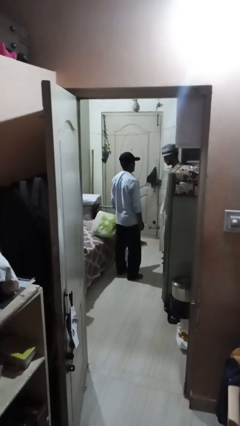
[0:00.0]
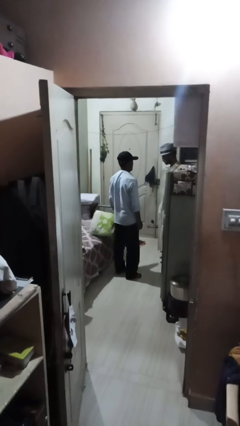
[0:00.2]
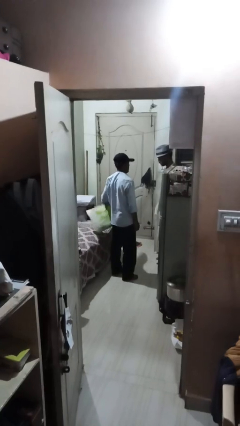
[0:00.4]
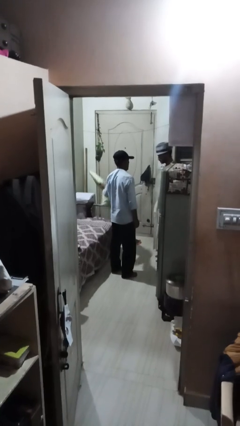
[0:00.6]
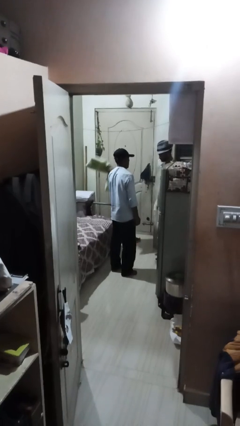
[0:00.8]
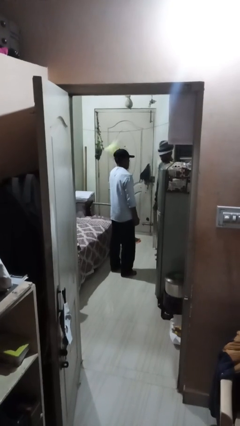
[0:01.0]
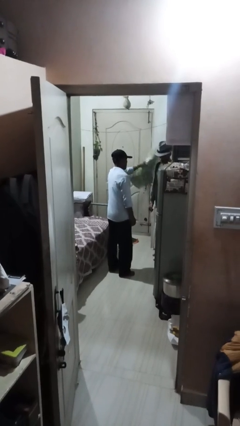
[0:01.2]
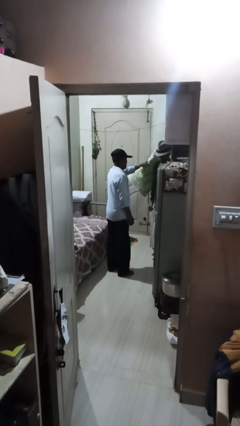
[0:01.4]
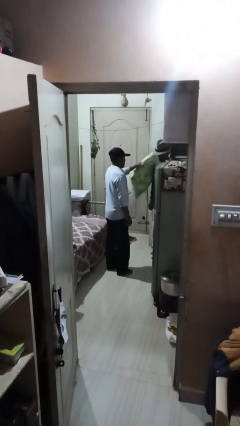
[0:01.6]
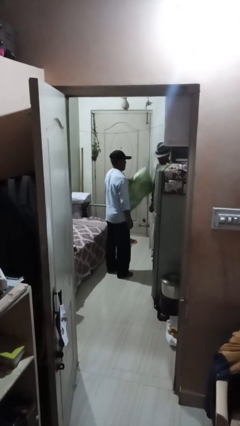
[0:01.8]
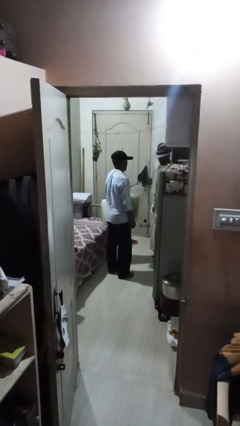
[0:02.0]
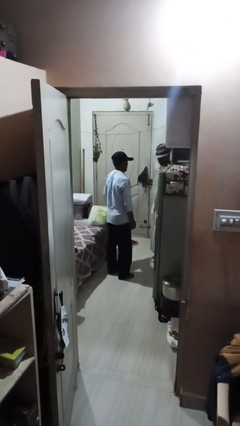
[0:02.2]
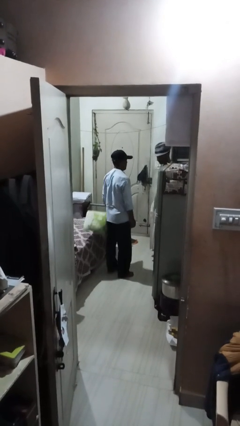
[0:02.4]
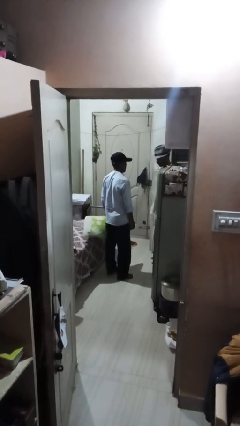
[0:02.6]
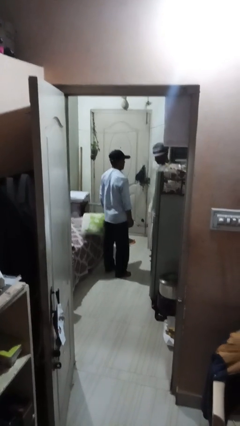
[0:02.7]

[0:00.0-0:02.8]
person hits person with pillow

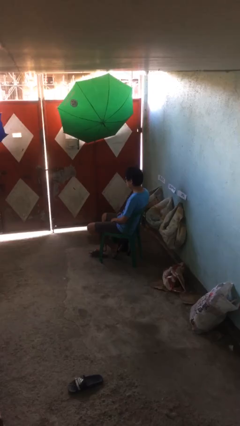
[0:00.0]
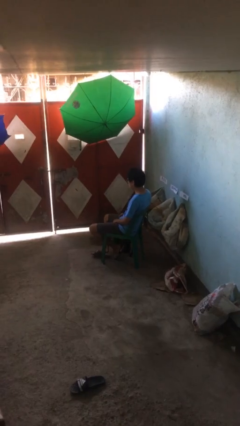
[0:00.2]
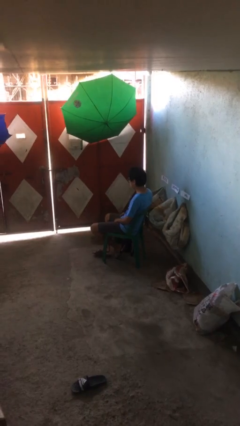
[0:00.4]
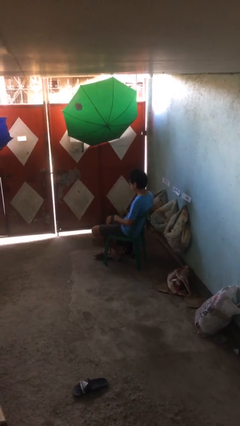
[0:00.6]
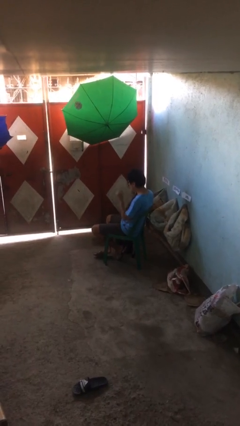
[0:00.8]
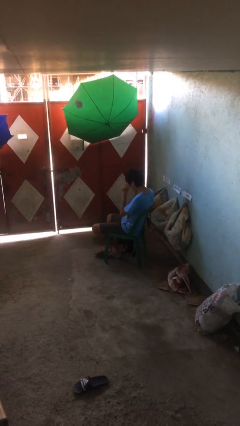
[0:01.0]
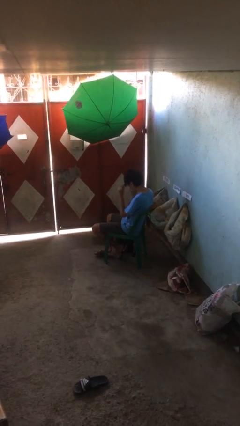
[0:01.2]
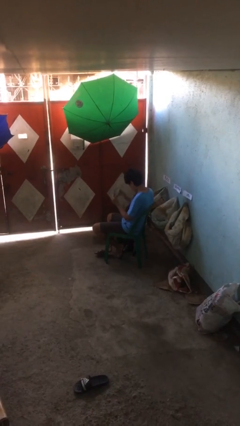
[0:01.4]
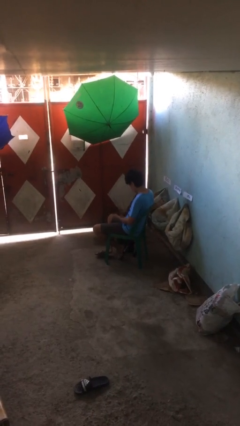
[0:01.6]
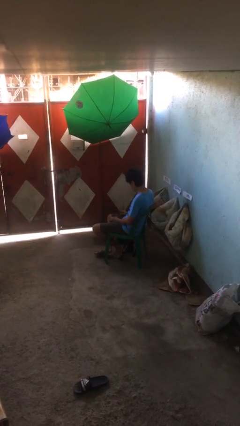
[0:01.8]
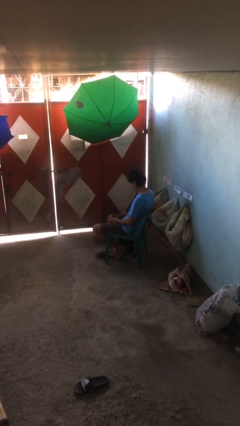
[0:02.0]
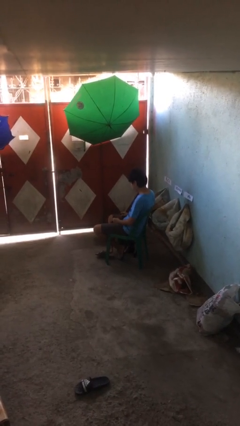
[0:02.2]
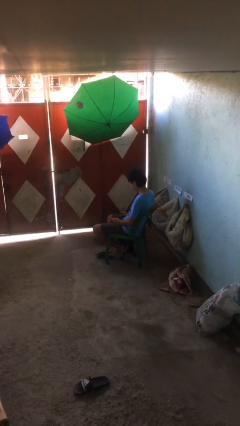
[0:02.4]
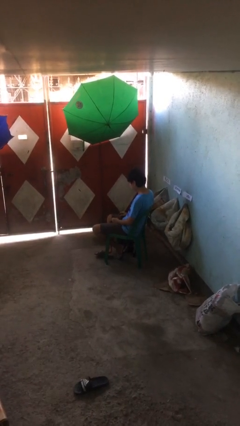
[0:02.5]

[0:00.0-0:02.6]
person takes off glasses

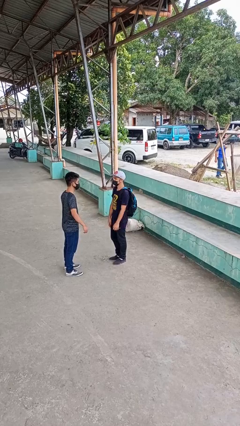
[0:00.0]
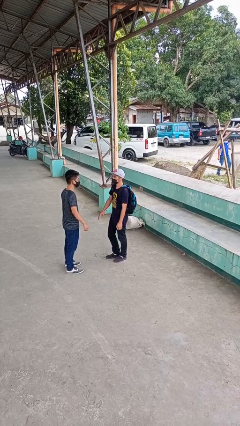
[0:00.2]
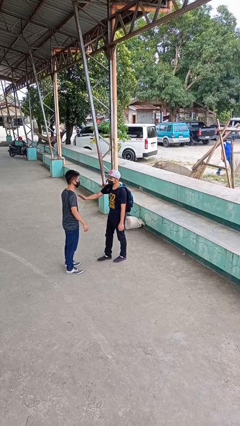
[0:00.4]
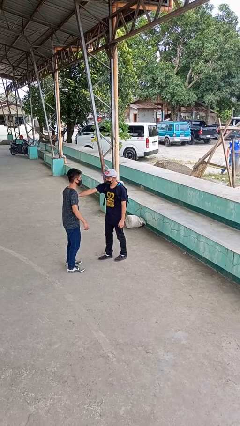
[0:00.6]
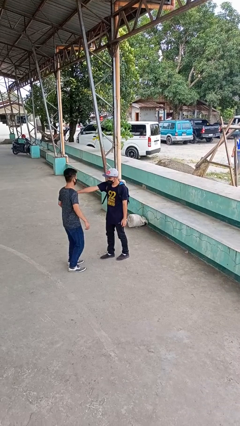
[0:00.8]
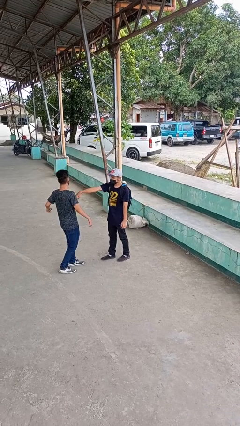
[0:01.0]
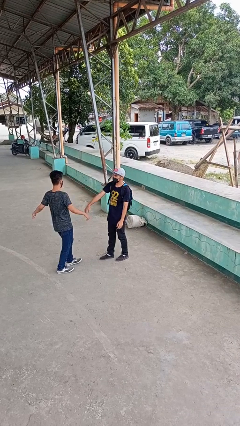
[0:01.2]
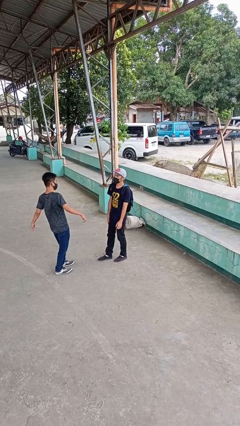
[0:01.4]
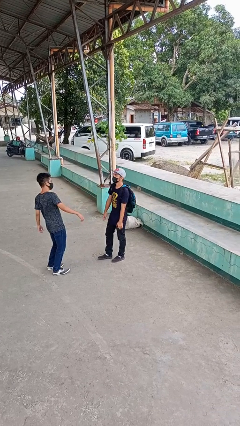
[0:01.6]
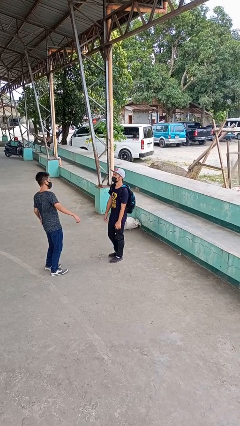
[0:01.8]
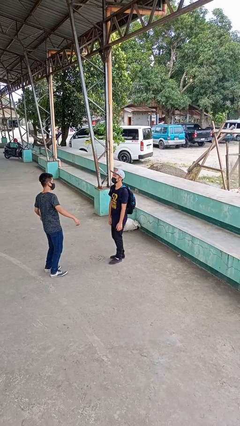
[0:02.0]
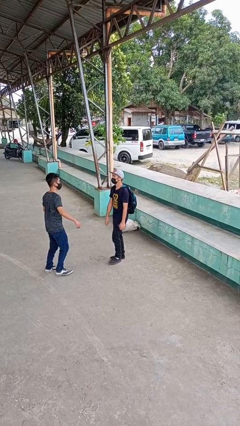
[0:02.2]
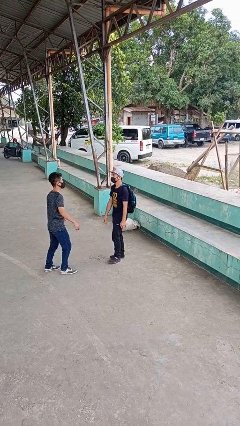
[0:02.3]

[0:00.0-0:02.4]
person shoves person

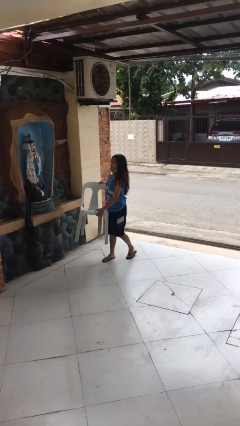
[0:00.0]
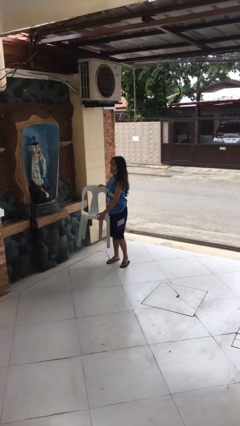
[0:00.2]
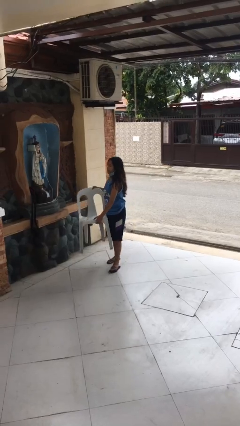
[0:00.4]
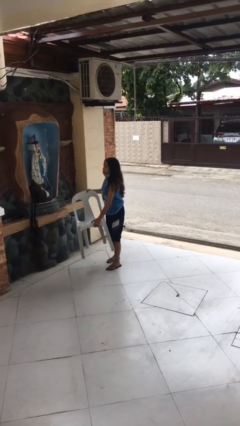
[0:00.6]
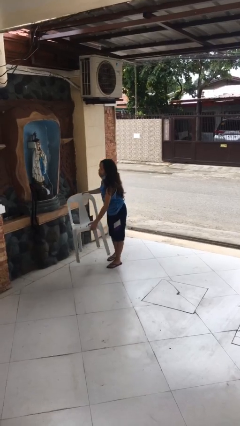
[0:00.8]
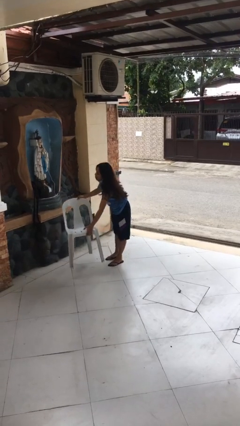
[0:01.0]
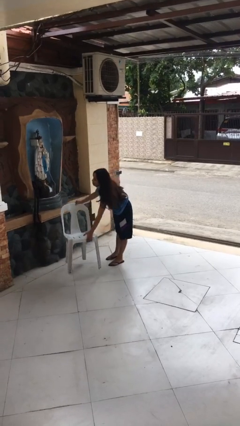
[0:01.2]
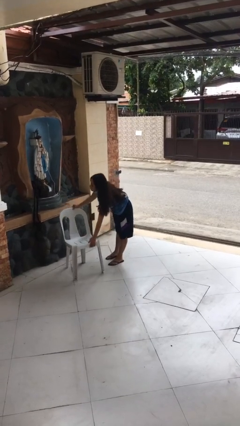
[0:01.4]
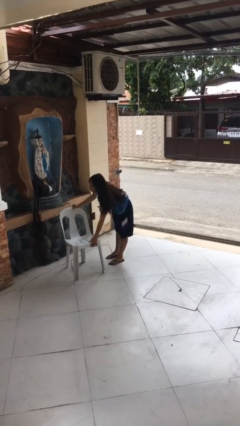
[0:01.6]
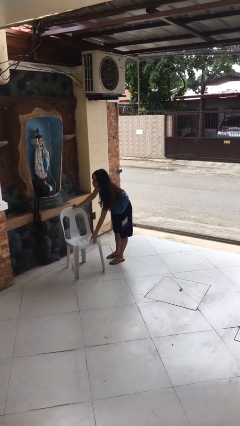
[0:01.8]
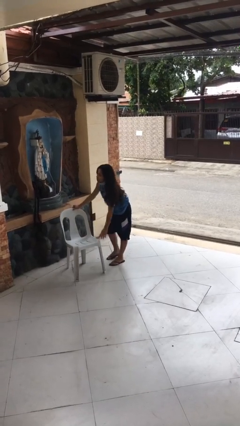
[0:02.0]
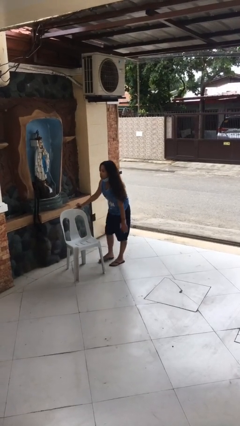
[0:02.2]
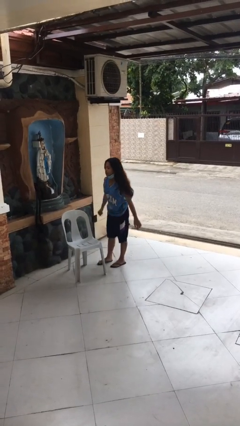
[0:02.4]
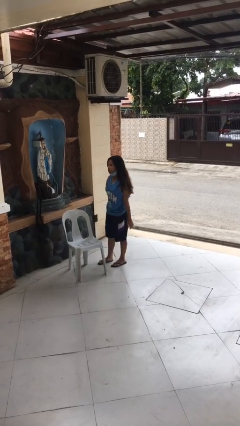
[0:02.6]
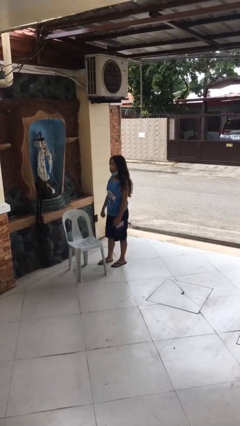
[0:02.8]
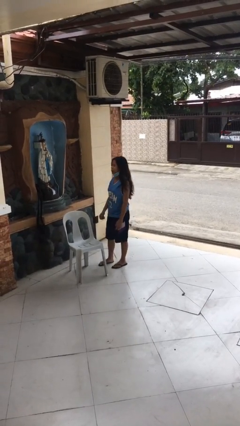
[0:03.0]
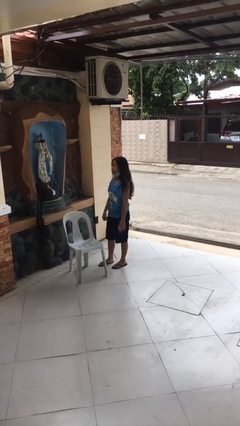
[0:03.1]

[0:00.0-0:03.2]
person puts down object on floor

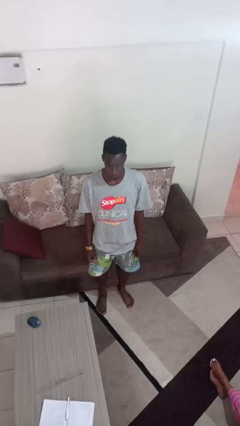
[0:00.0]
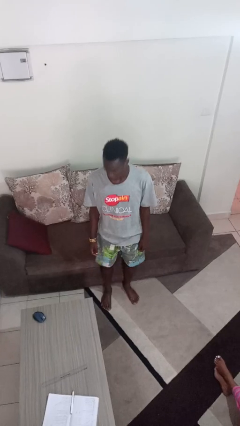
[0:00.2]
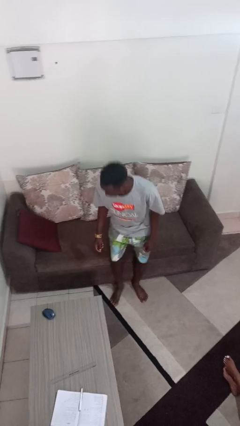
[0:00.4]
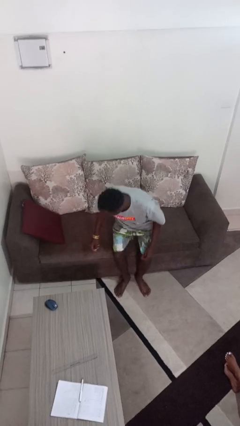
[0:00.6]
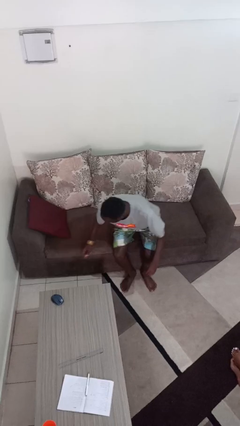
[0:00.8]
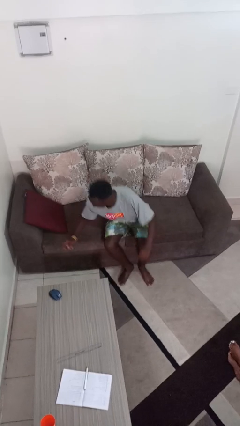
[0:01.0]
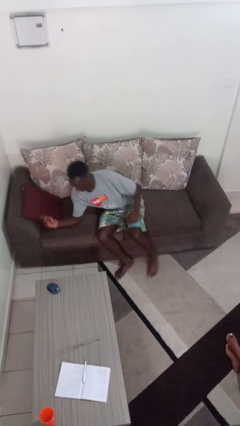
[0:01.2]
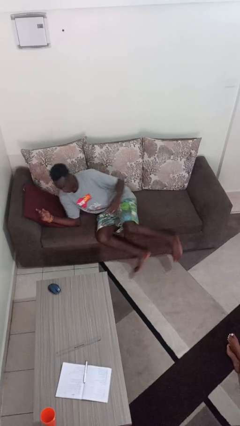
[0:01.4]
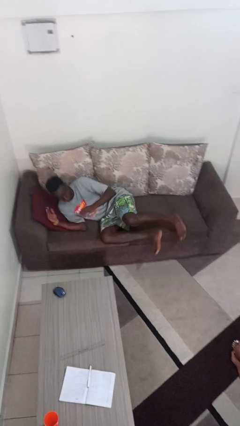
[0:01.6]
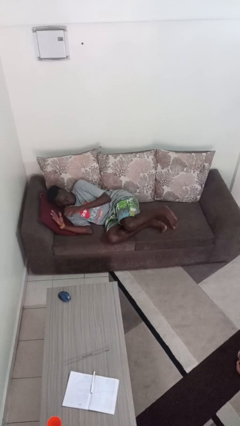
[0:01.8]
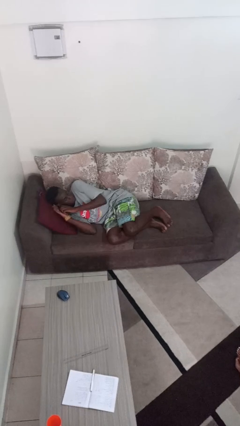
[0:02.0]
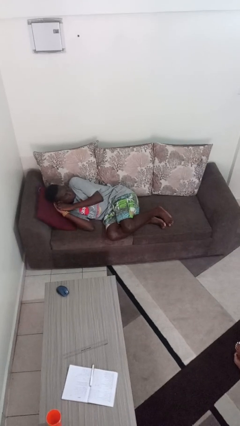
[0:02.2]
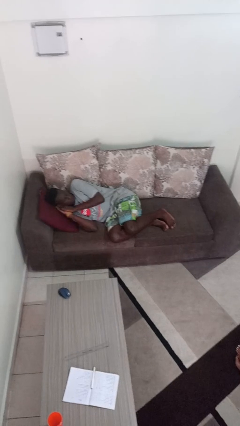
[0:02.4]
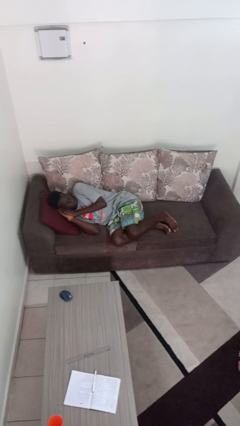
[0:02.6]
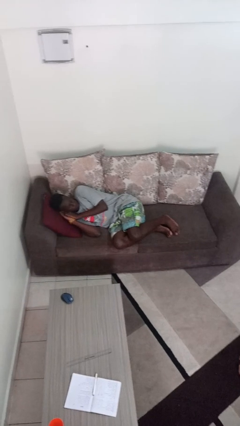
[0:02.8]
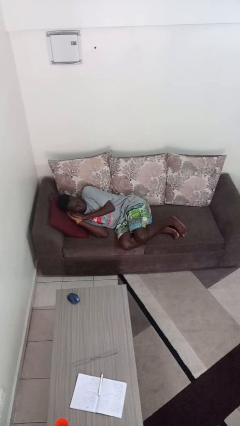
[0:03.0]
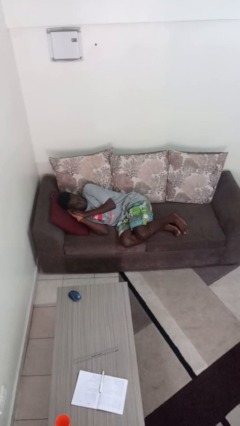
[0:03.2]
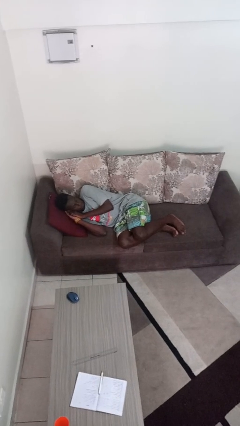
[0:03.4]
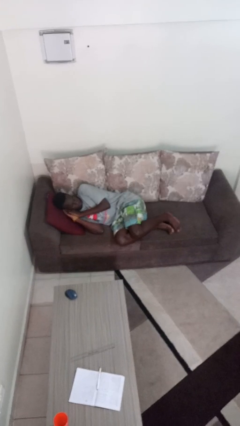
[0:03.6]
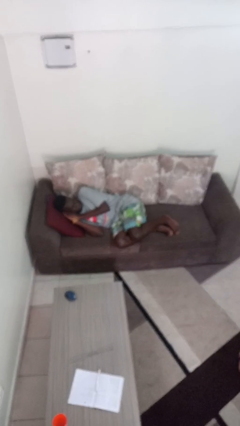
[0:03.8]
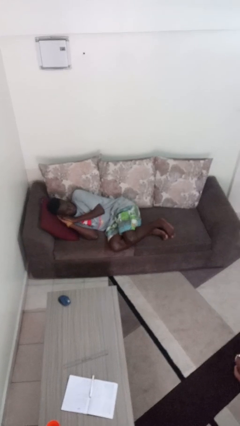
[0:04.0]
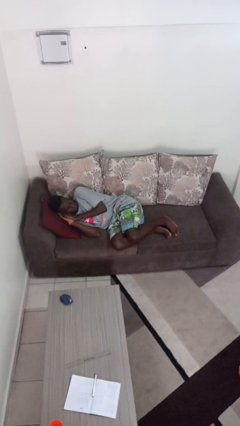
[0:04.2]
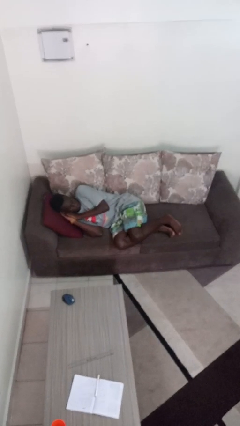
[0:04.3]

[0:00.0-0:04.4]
person lies down on couch

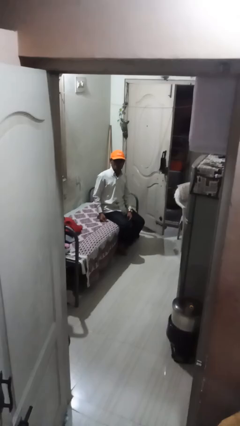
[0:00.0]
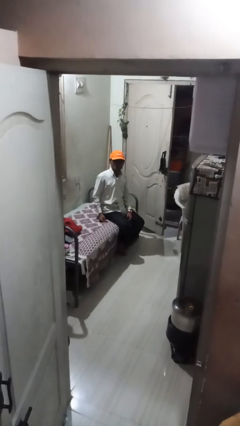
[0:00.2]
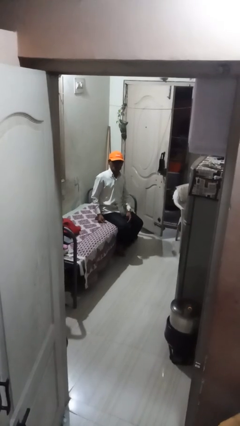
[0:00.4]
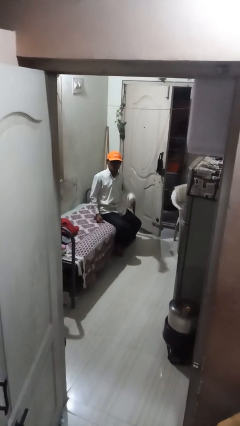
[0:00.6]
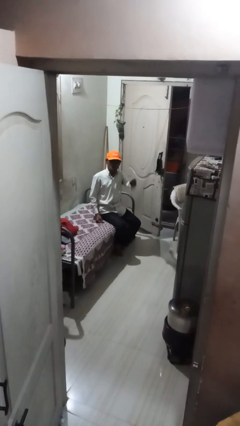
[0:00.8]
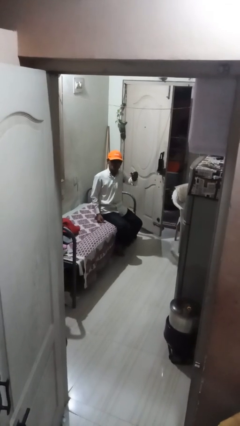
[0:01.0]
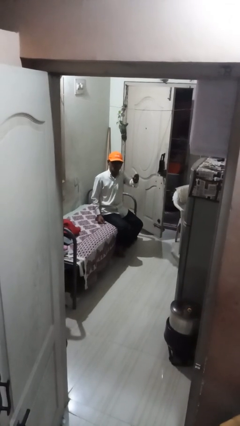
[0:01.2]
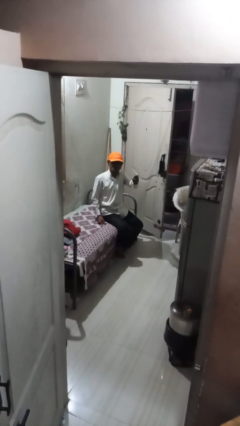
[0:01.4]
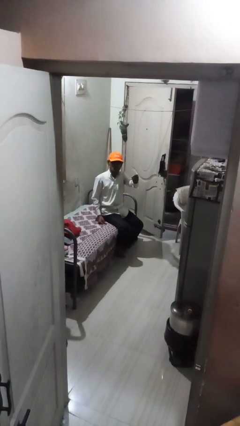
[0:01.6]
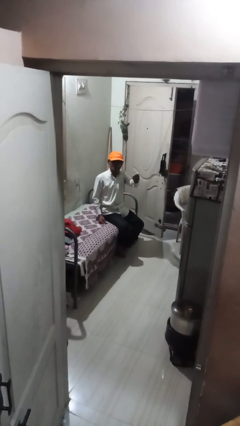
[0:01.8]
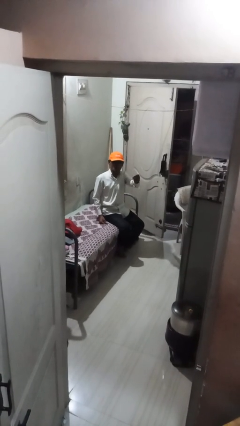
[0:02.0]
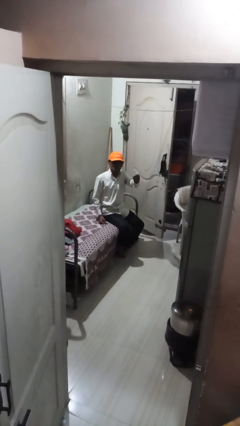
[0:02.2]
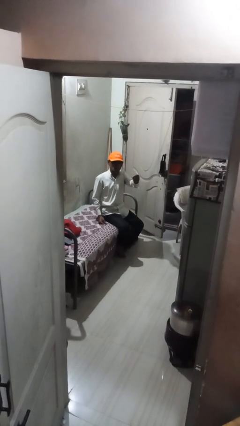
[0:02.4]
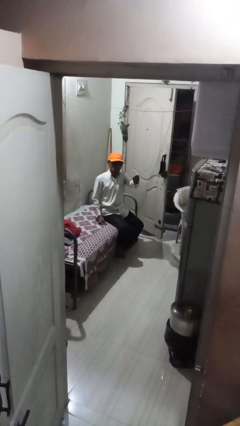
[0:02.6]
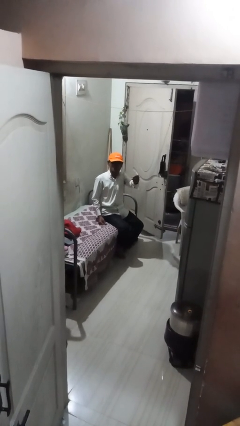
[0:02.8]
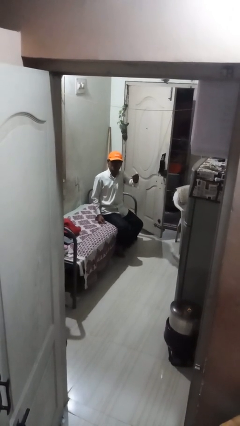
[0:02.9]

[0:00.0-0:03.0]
person snaps fingers
